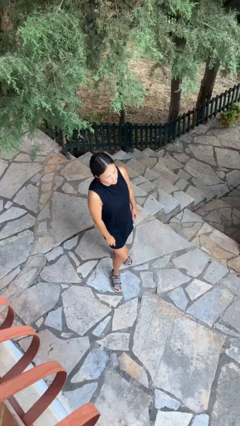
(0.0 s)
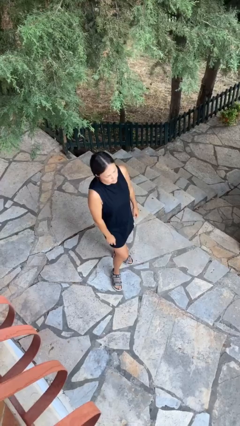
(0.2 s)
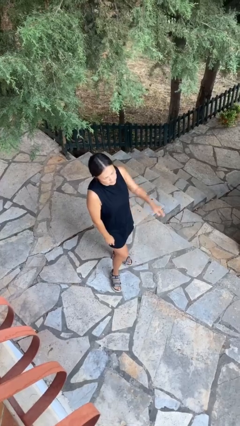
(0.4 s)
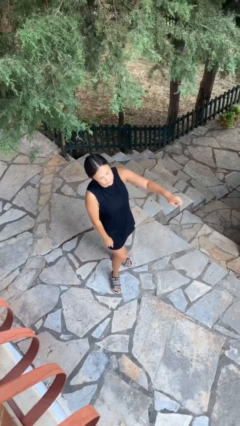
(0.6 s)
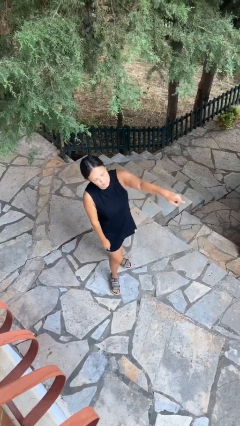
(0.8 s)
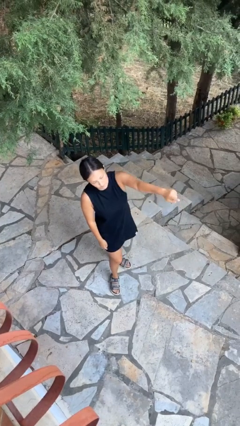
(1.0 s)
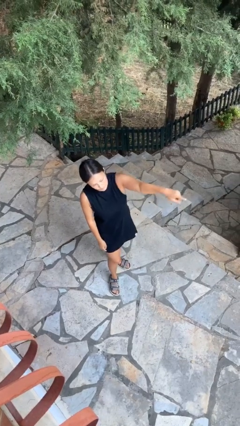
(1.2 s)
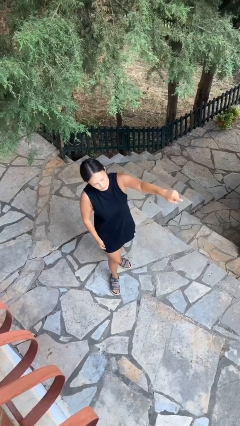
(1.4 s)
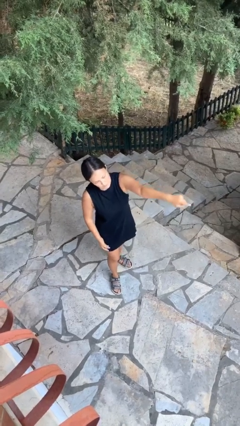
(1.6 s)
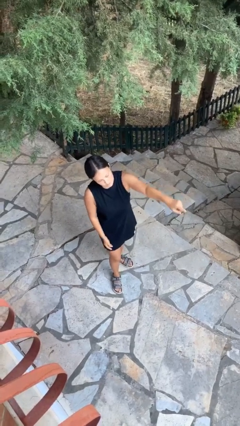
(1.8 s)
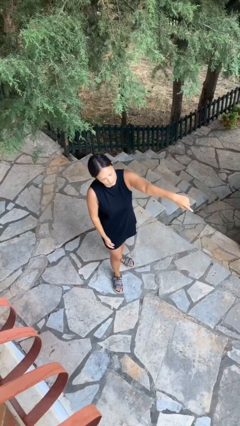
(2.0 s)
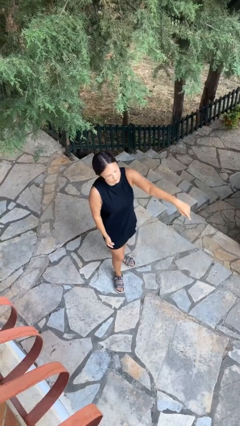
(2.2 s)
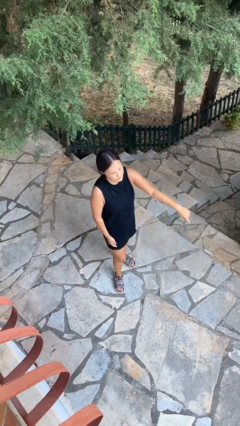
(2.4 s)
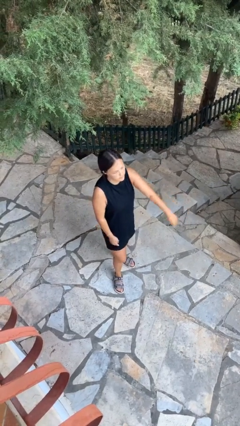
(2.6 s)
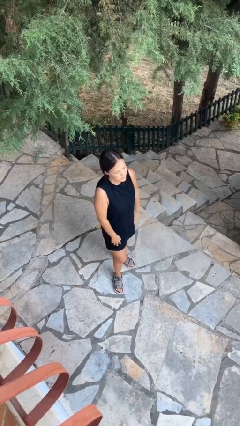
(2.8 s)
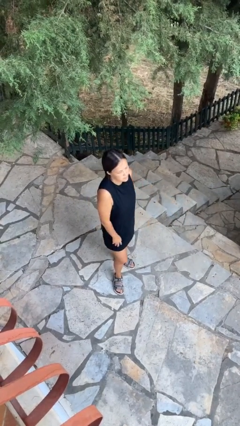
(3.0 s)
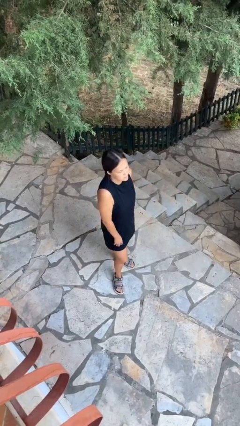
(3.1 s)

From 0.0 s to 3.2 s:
person points at person

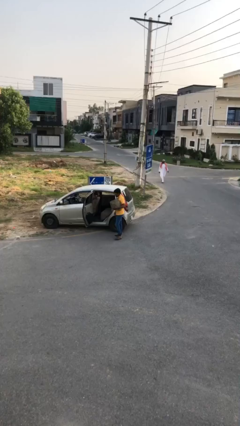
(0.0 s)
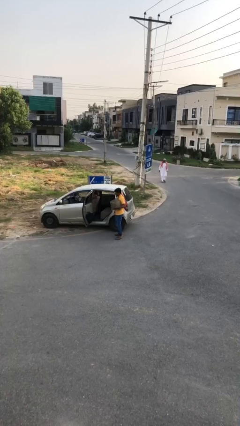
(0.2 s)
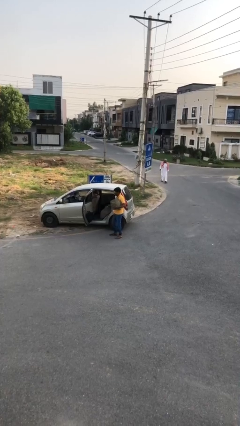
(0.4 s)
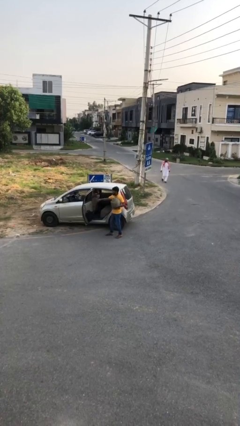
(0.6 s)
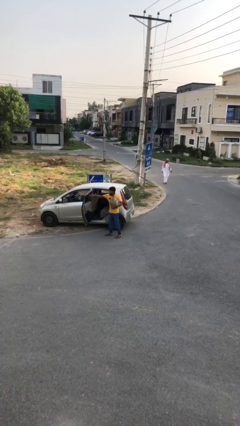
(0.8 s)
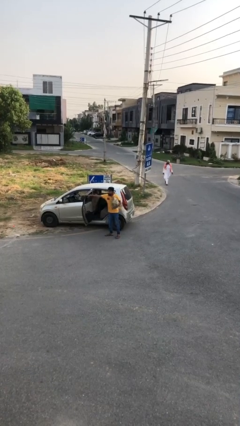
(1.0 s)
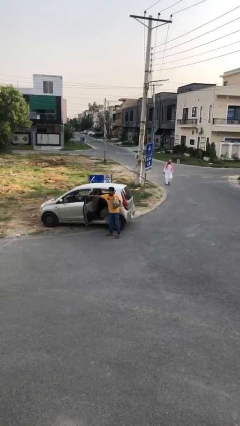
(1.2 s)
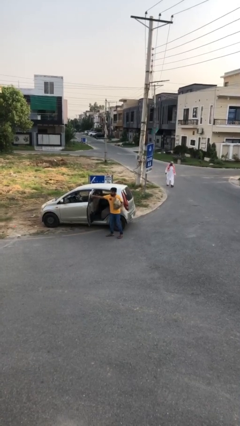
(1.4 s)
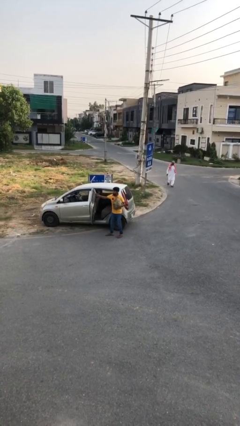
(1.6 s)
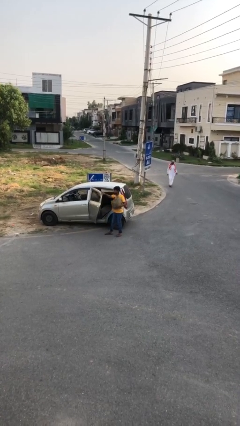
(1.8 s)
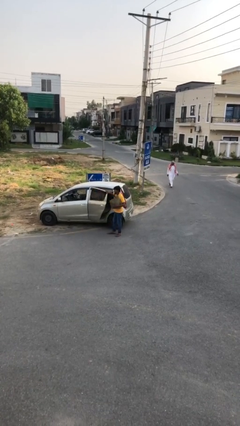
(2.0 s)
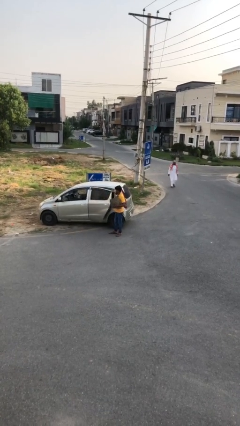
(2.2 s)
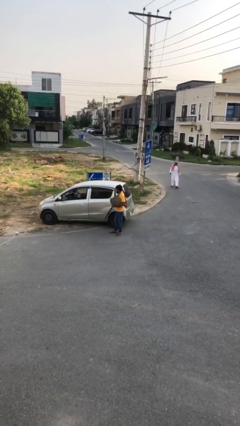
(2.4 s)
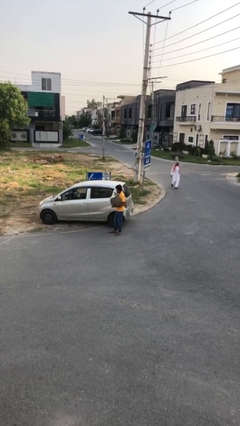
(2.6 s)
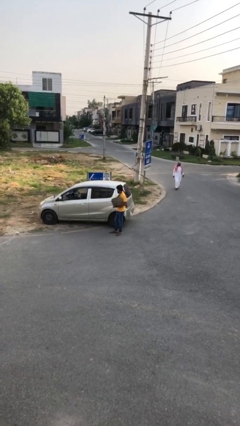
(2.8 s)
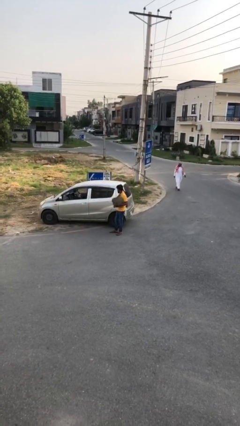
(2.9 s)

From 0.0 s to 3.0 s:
person closes car door

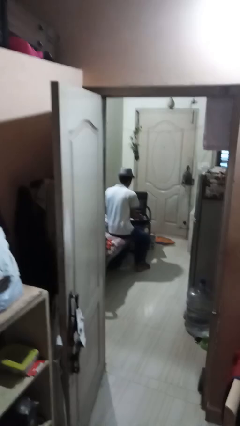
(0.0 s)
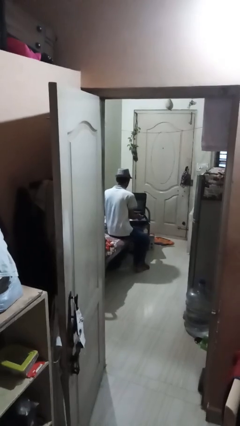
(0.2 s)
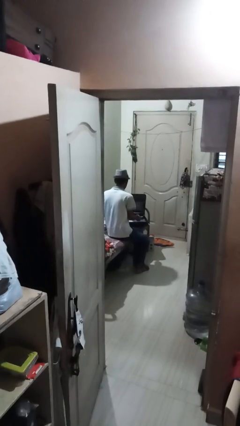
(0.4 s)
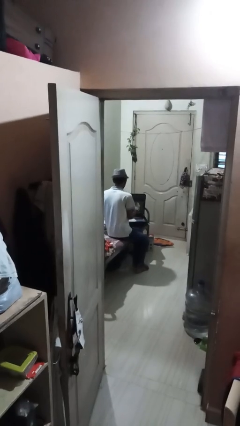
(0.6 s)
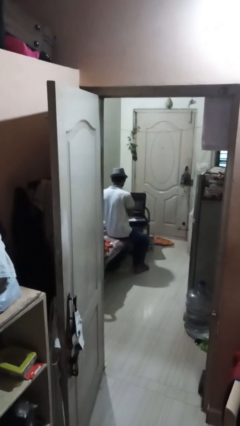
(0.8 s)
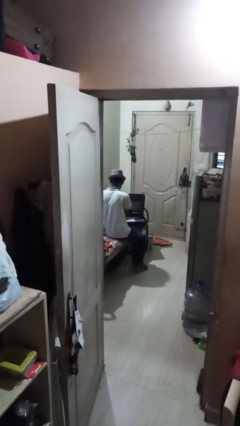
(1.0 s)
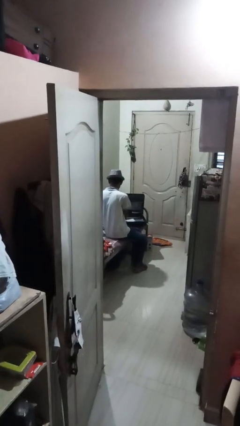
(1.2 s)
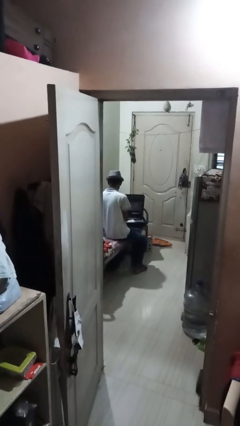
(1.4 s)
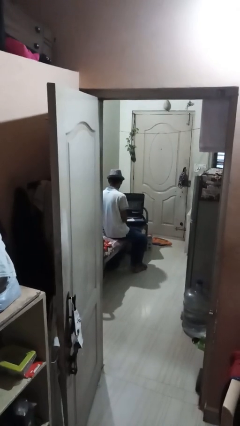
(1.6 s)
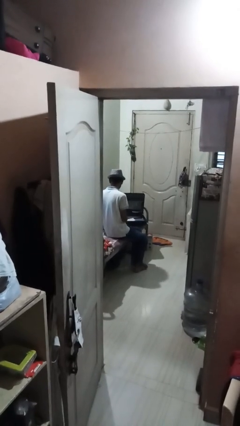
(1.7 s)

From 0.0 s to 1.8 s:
person unloads clothes from suitcase

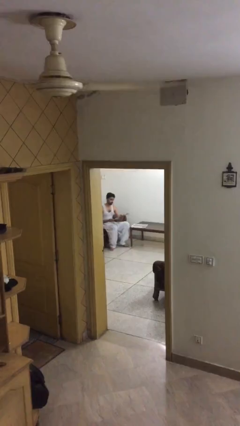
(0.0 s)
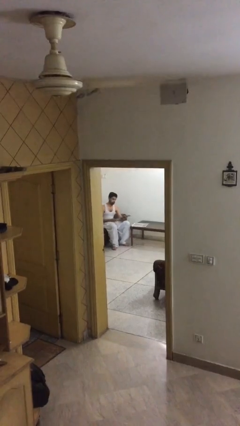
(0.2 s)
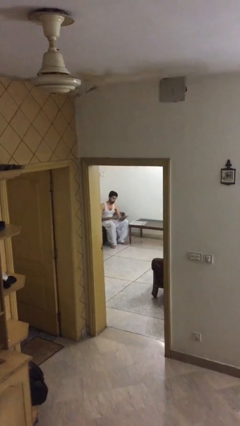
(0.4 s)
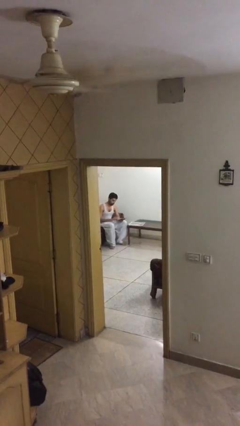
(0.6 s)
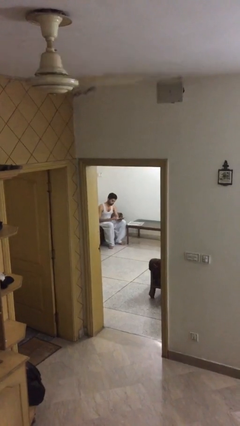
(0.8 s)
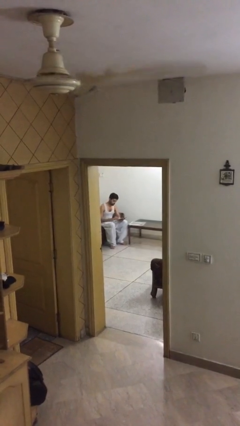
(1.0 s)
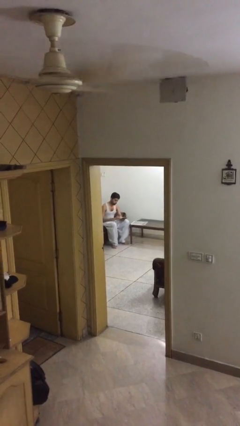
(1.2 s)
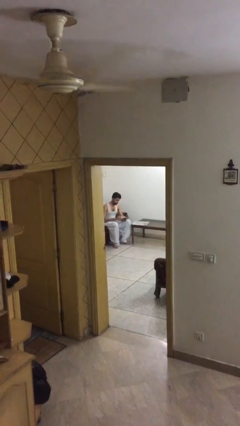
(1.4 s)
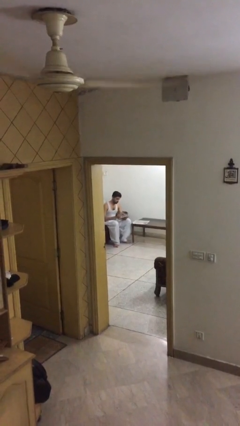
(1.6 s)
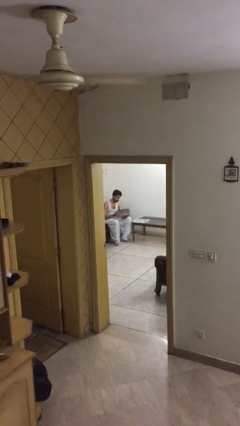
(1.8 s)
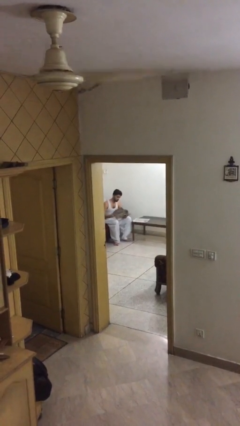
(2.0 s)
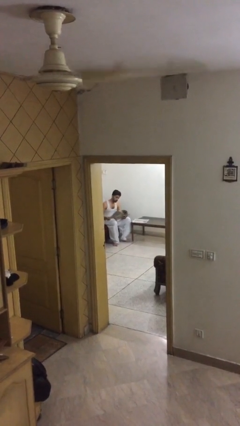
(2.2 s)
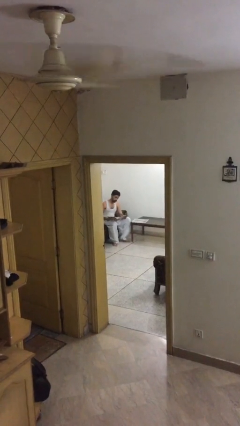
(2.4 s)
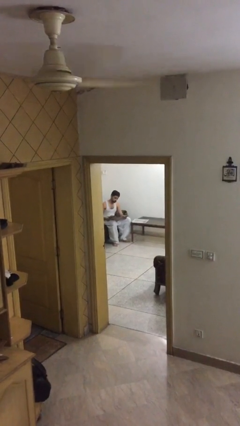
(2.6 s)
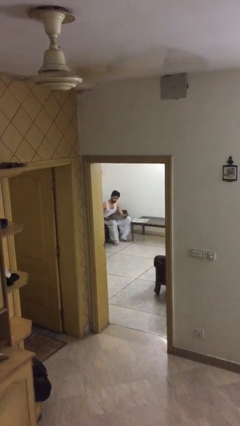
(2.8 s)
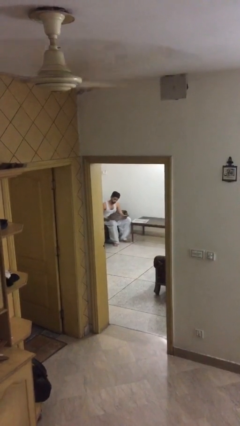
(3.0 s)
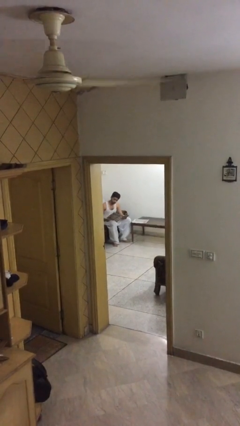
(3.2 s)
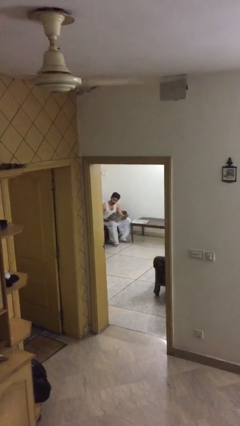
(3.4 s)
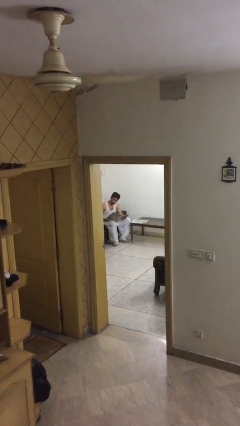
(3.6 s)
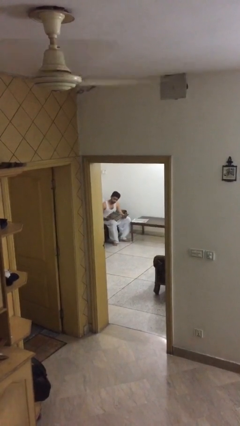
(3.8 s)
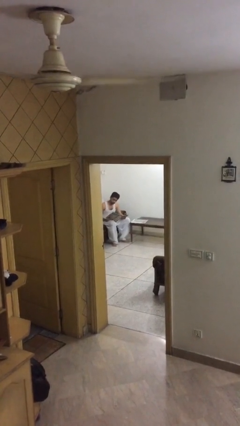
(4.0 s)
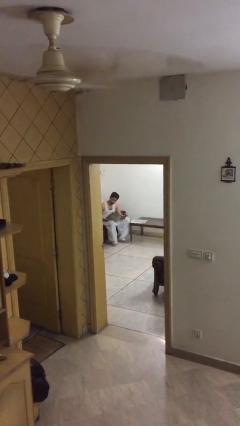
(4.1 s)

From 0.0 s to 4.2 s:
person reads document

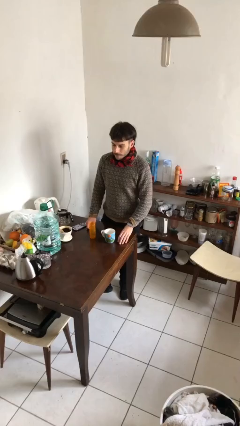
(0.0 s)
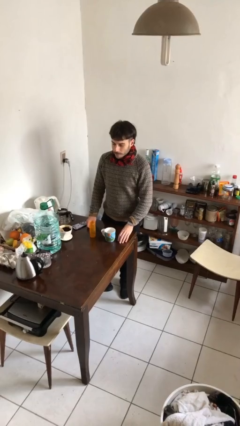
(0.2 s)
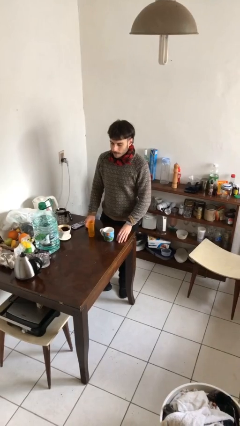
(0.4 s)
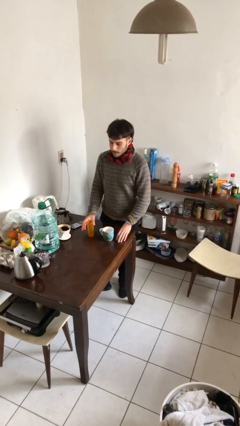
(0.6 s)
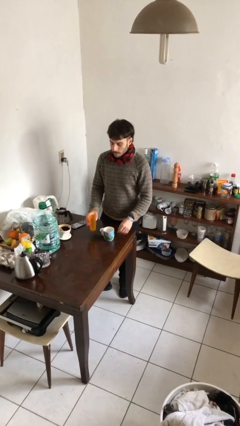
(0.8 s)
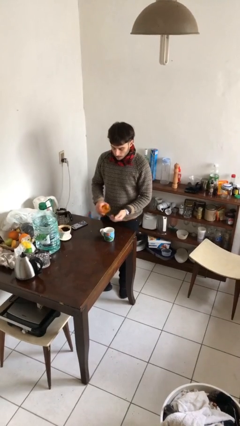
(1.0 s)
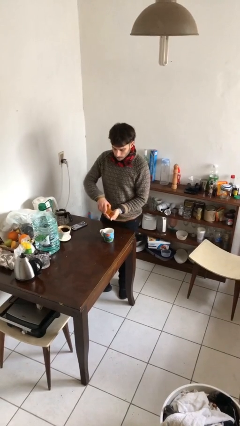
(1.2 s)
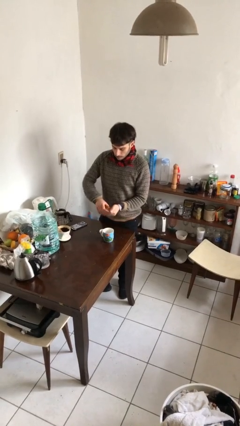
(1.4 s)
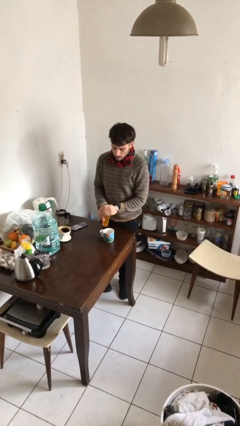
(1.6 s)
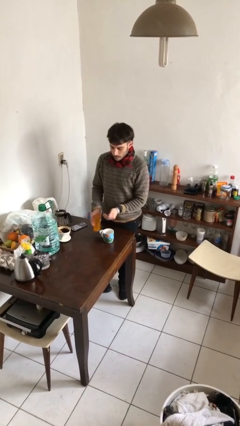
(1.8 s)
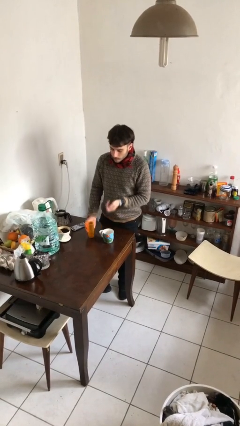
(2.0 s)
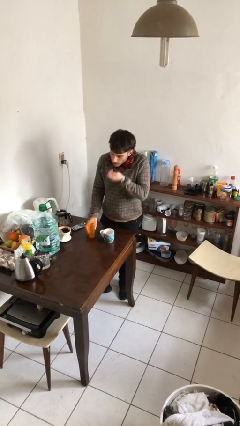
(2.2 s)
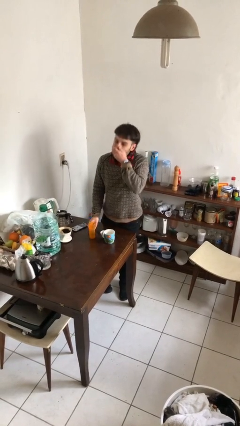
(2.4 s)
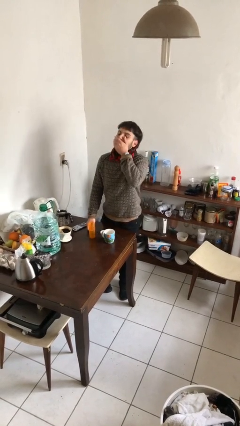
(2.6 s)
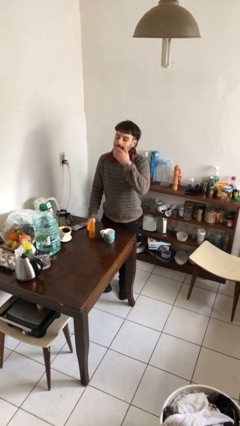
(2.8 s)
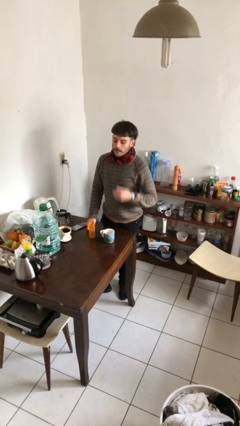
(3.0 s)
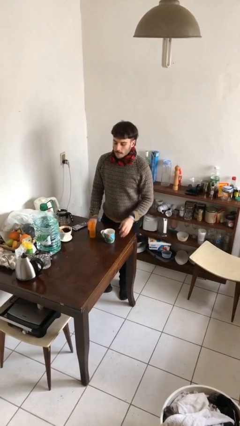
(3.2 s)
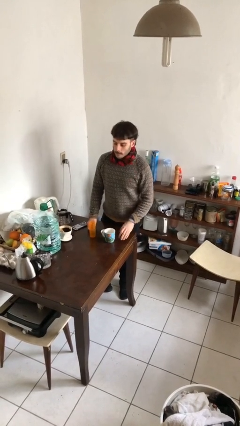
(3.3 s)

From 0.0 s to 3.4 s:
person takes medicine pills

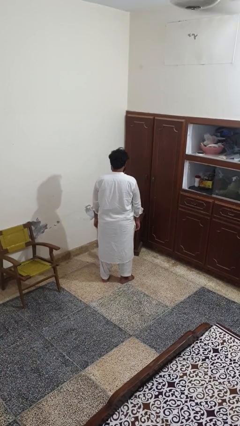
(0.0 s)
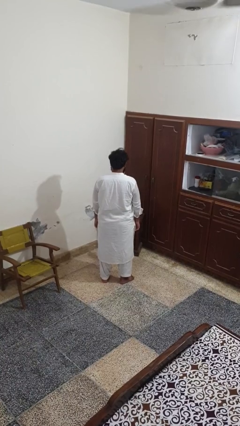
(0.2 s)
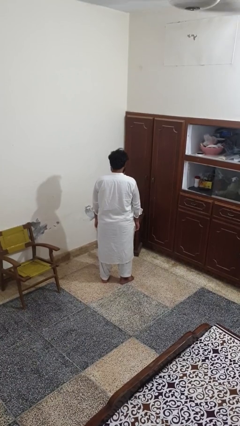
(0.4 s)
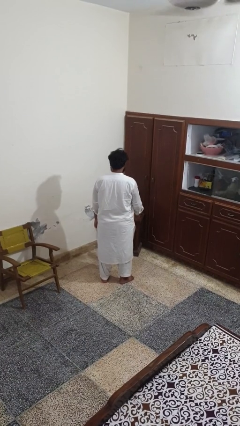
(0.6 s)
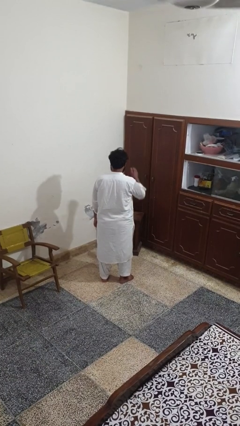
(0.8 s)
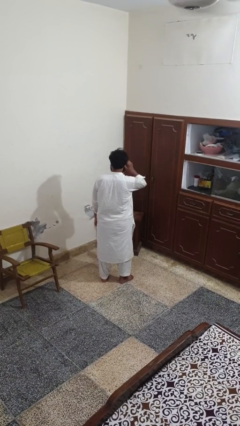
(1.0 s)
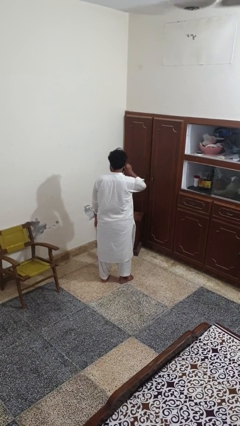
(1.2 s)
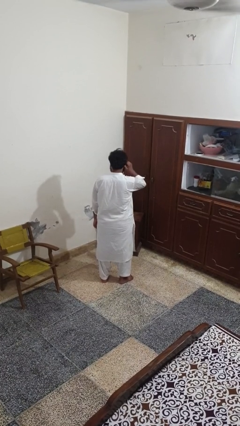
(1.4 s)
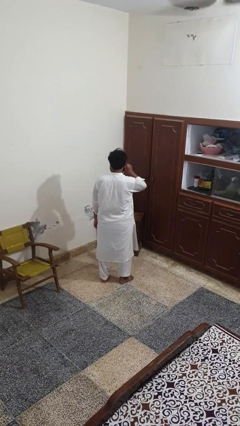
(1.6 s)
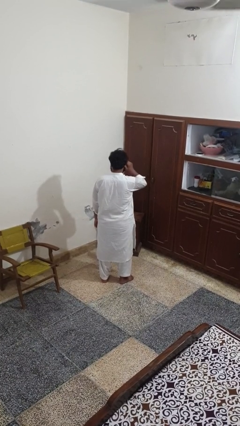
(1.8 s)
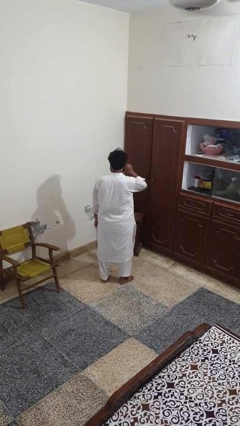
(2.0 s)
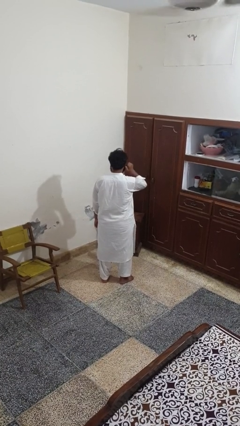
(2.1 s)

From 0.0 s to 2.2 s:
person touches earlobe
